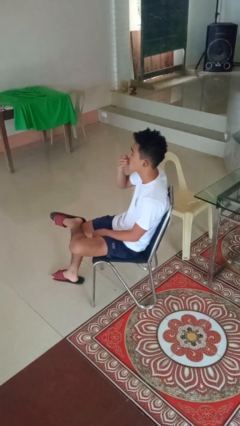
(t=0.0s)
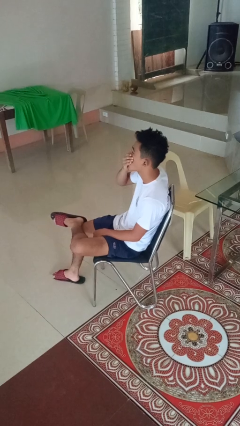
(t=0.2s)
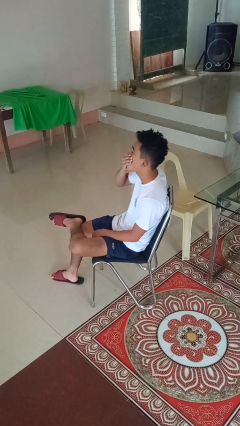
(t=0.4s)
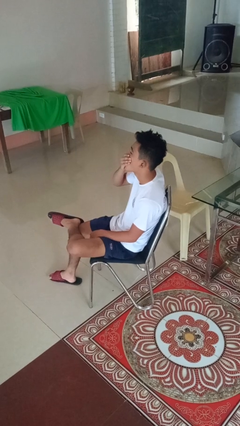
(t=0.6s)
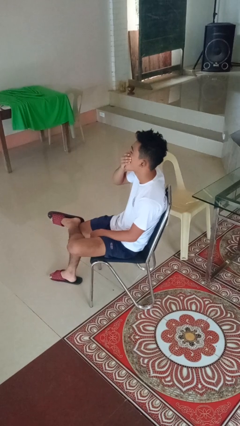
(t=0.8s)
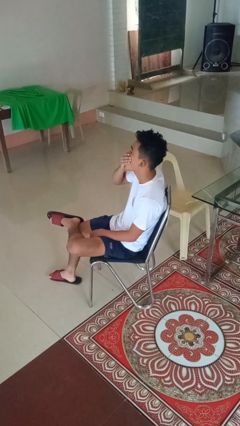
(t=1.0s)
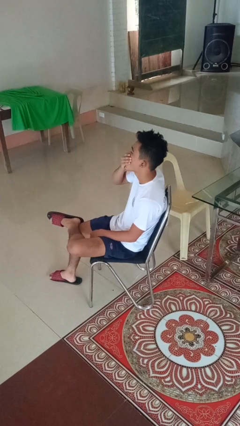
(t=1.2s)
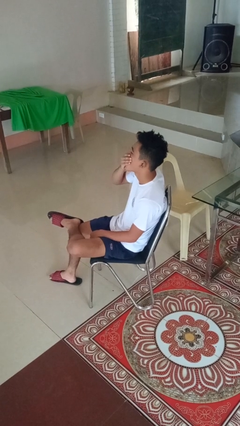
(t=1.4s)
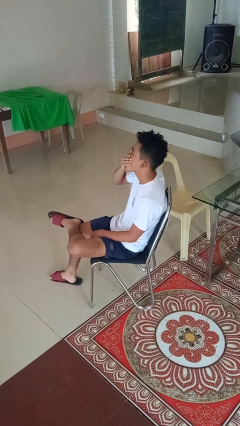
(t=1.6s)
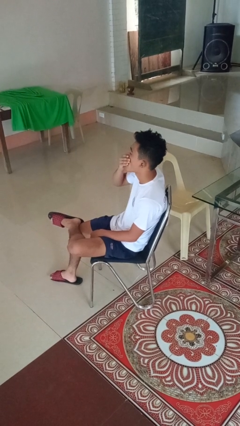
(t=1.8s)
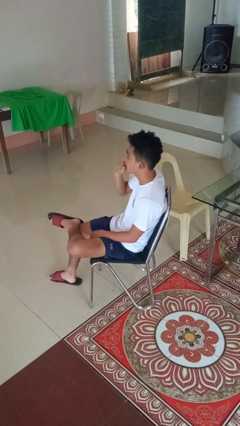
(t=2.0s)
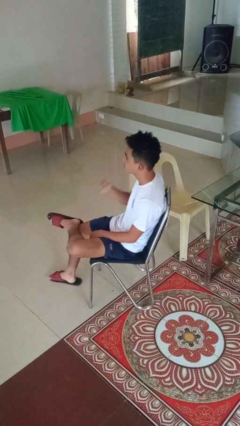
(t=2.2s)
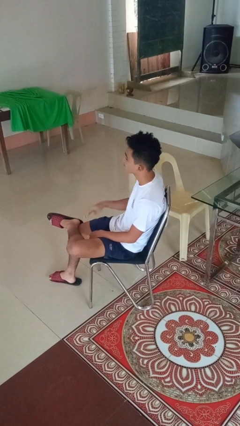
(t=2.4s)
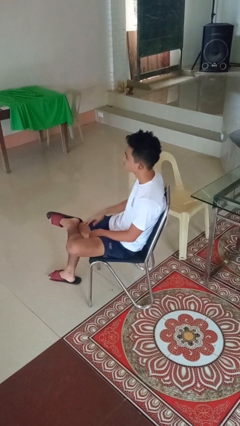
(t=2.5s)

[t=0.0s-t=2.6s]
person yawns

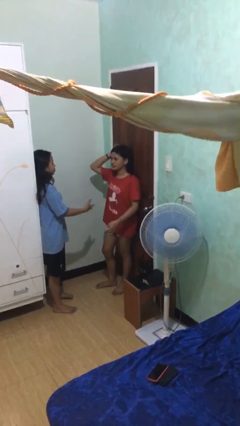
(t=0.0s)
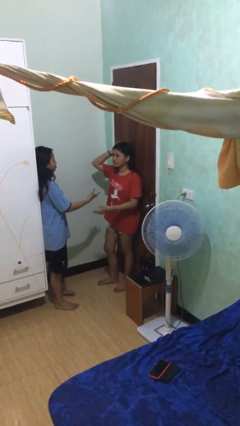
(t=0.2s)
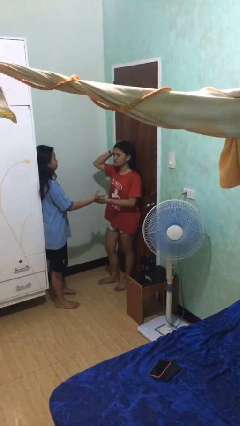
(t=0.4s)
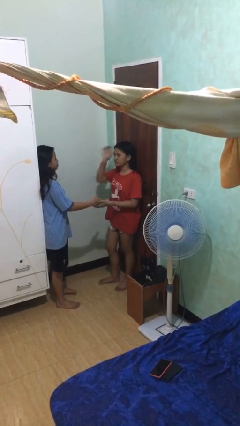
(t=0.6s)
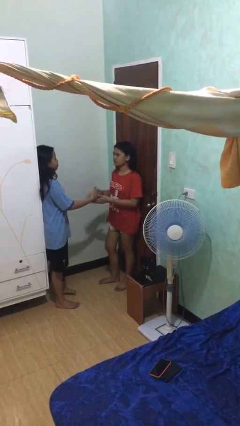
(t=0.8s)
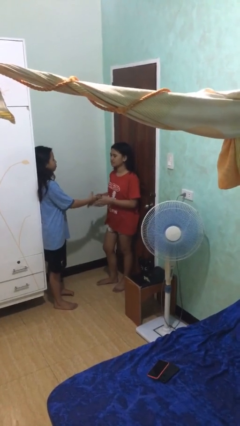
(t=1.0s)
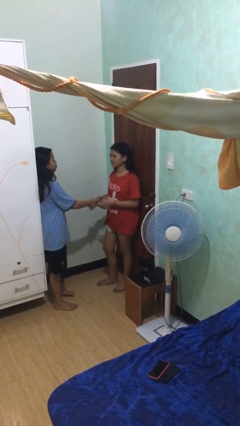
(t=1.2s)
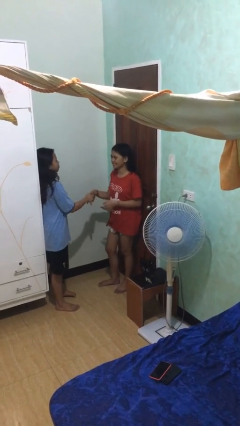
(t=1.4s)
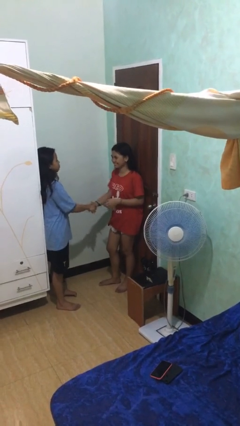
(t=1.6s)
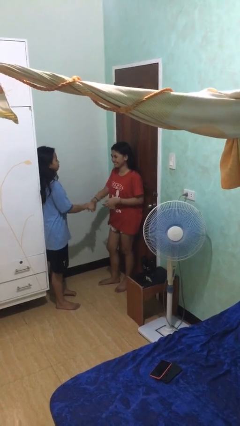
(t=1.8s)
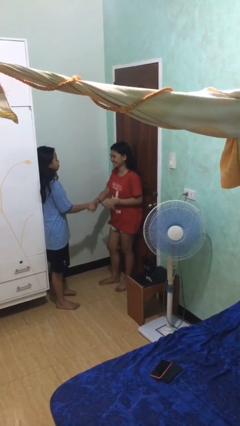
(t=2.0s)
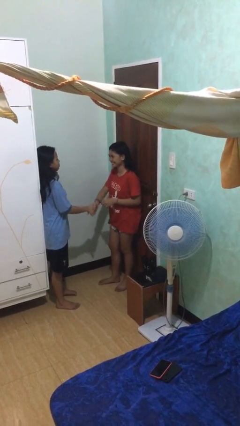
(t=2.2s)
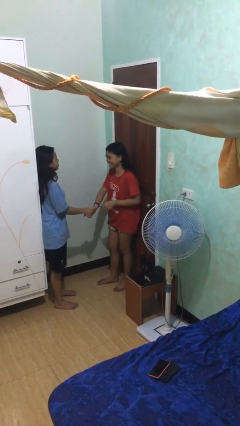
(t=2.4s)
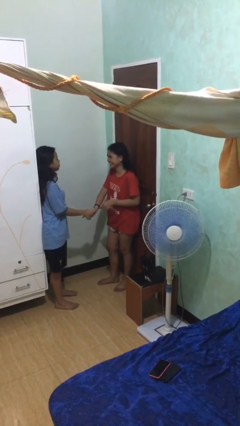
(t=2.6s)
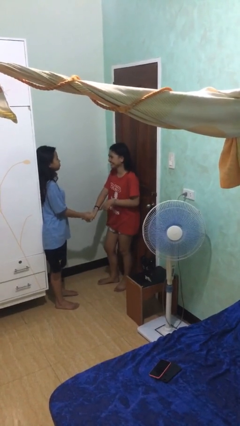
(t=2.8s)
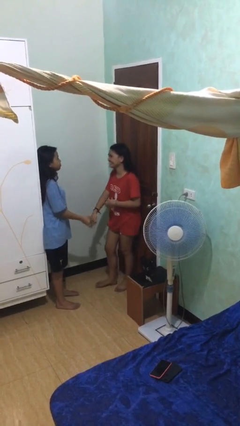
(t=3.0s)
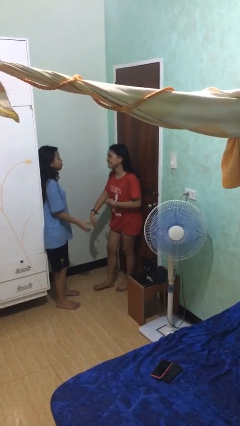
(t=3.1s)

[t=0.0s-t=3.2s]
person shakes hand

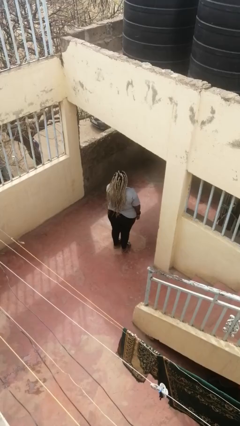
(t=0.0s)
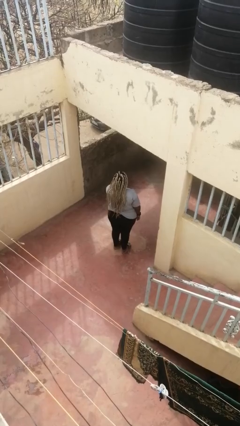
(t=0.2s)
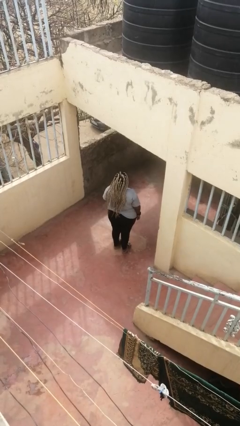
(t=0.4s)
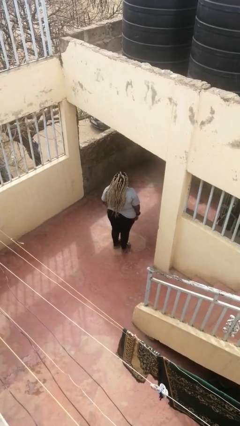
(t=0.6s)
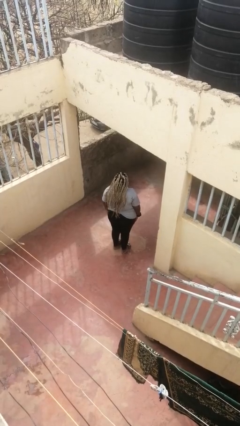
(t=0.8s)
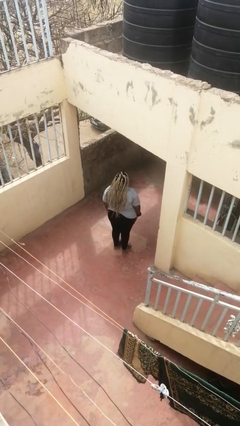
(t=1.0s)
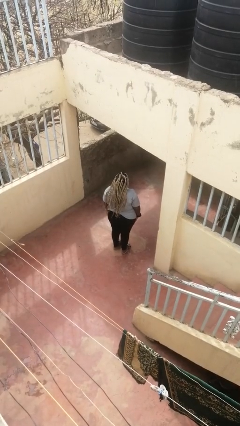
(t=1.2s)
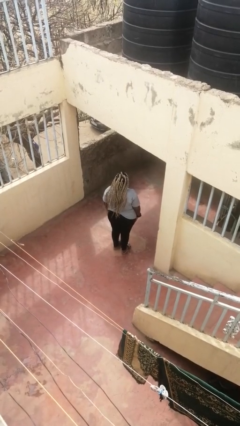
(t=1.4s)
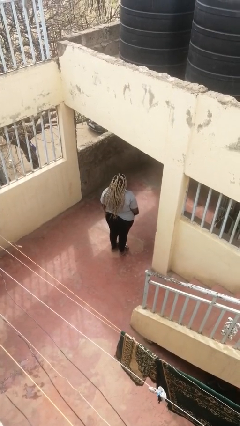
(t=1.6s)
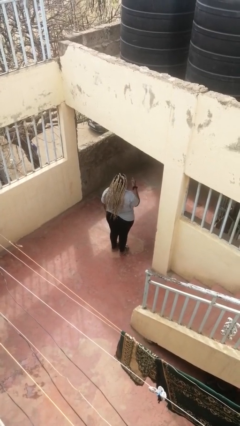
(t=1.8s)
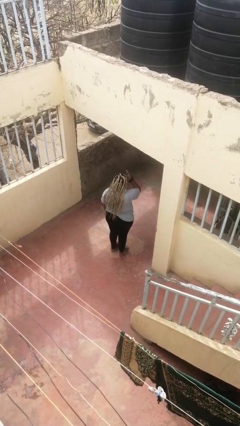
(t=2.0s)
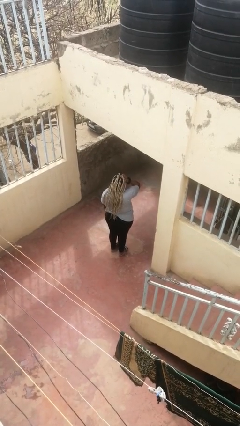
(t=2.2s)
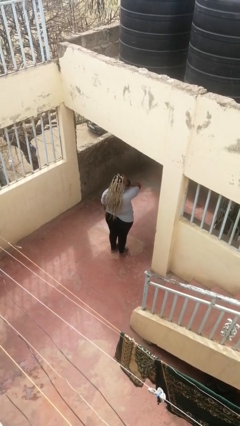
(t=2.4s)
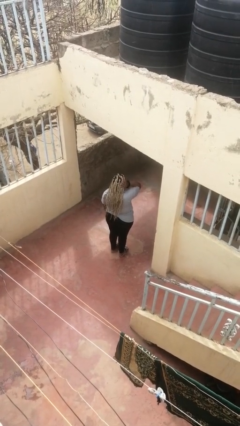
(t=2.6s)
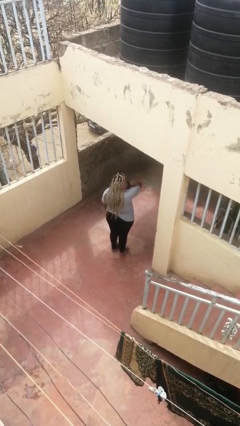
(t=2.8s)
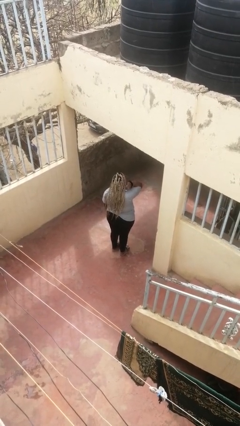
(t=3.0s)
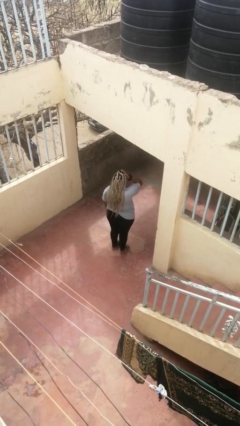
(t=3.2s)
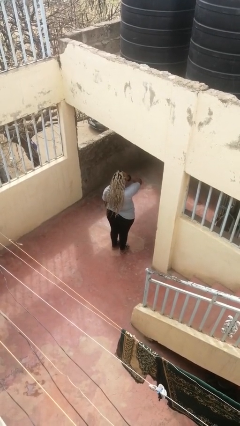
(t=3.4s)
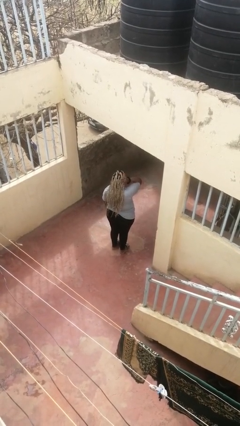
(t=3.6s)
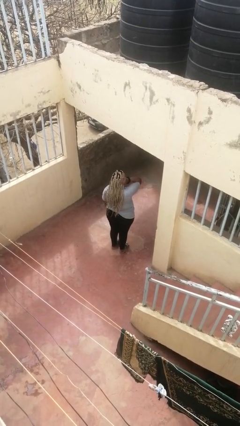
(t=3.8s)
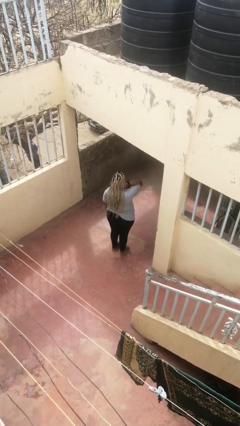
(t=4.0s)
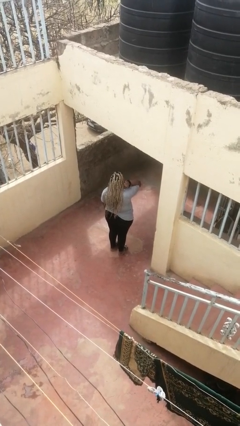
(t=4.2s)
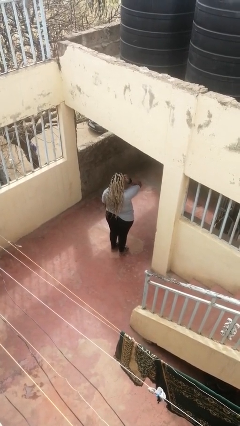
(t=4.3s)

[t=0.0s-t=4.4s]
person strokes hair

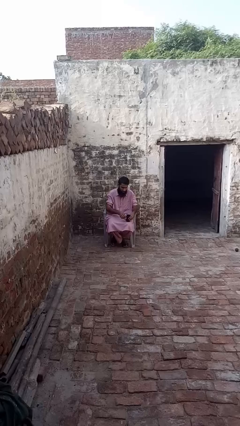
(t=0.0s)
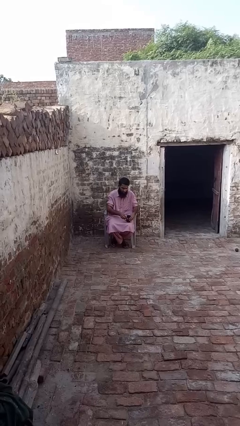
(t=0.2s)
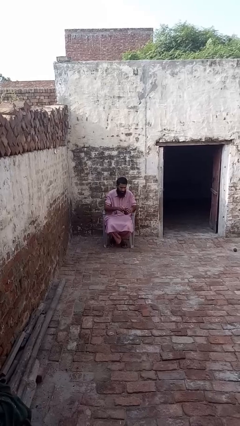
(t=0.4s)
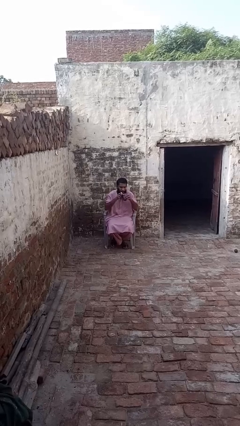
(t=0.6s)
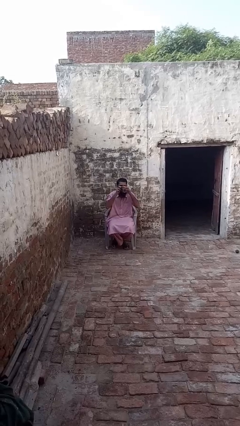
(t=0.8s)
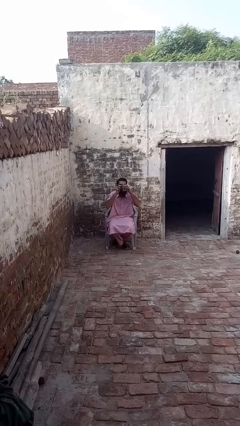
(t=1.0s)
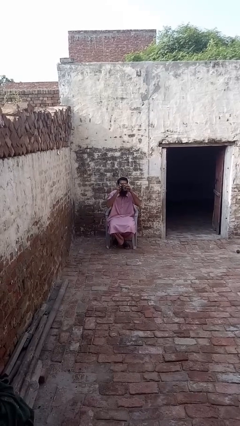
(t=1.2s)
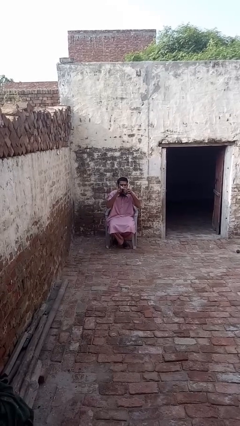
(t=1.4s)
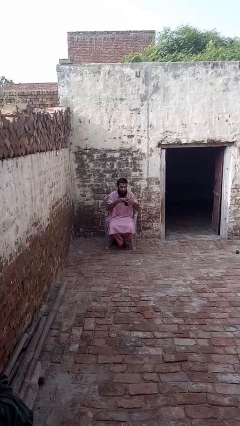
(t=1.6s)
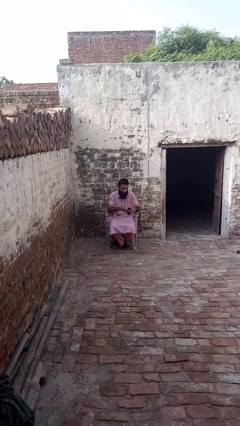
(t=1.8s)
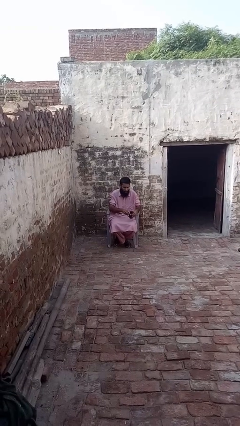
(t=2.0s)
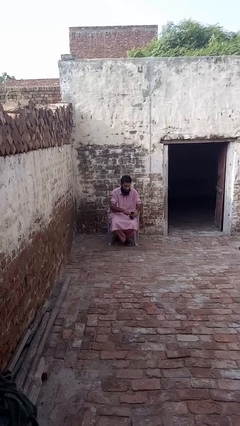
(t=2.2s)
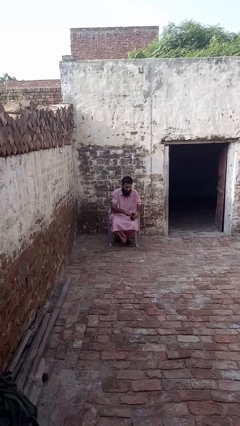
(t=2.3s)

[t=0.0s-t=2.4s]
person drinks from mug

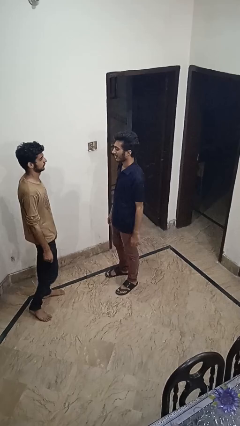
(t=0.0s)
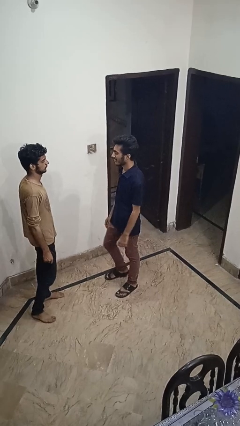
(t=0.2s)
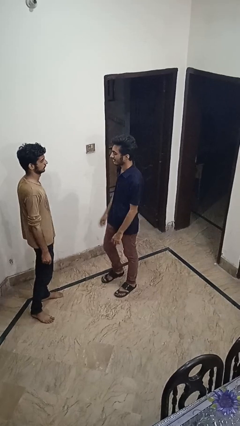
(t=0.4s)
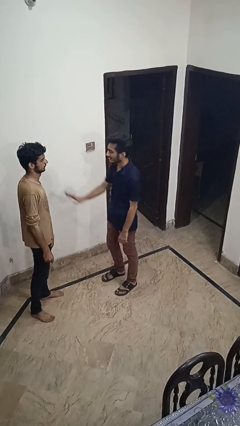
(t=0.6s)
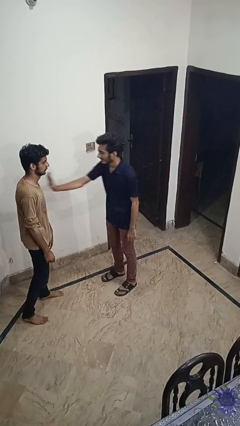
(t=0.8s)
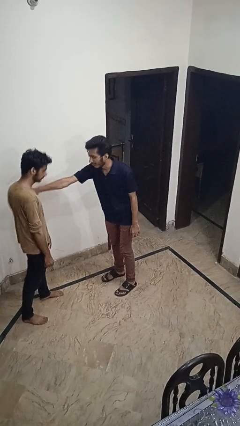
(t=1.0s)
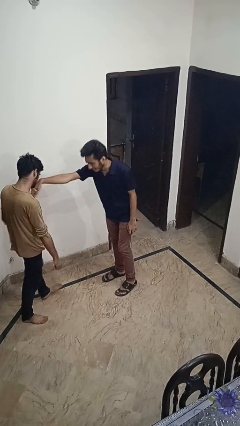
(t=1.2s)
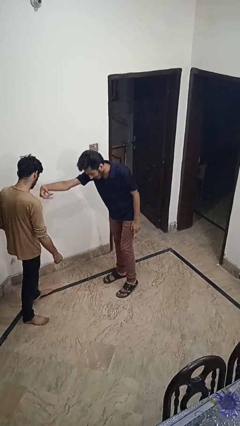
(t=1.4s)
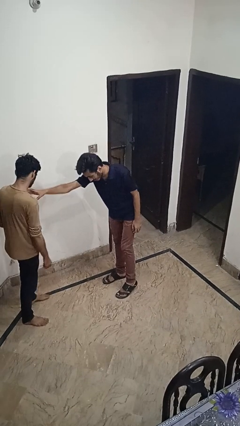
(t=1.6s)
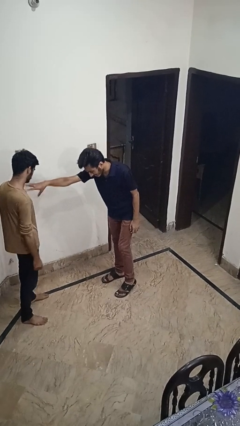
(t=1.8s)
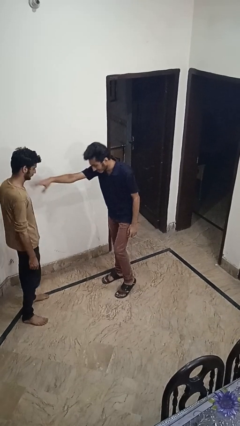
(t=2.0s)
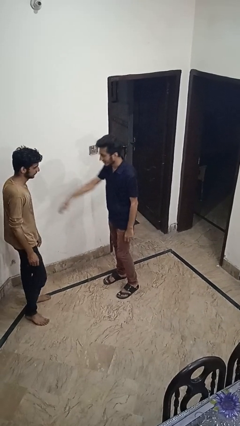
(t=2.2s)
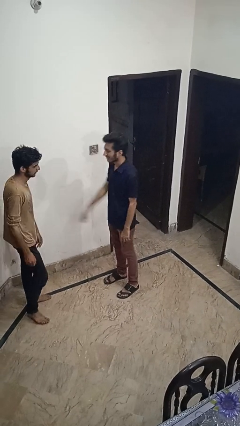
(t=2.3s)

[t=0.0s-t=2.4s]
person shoves person

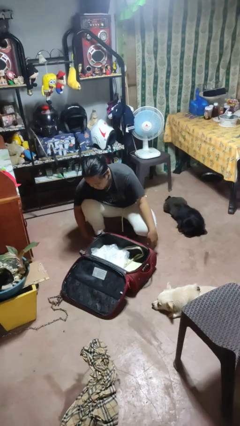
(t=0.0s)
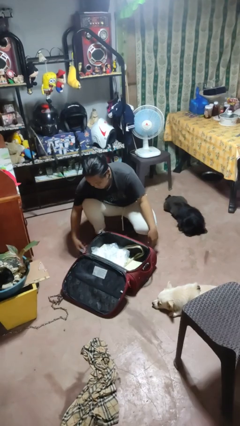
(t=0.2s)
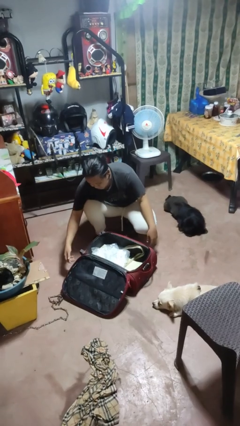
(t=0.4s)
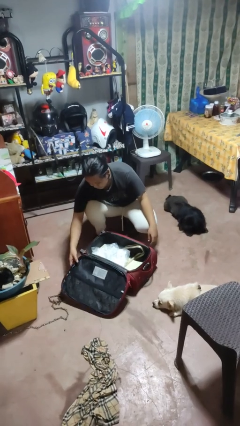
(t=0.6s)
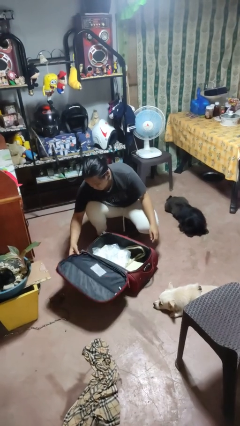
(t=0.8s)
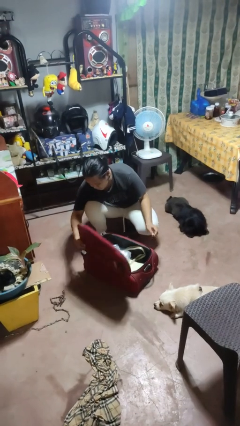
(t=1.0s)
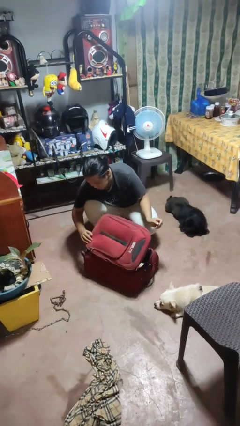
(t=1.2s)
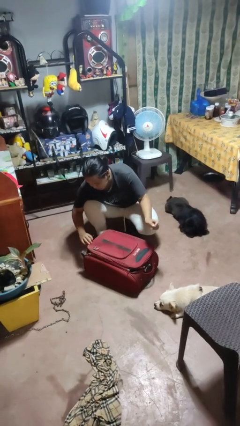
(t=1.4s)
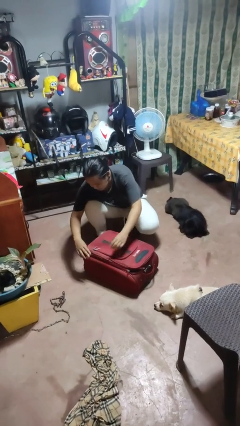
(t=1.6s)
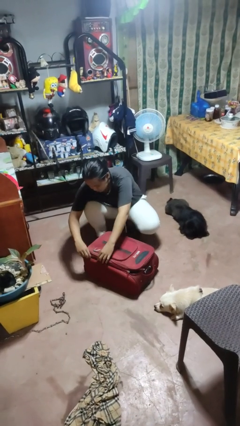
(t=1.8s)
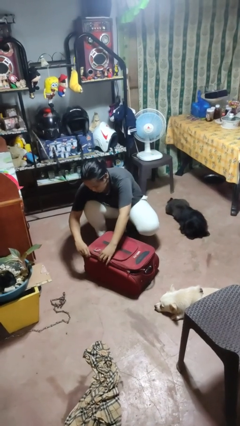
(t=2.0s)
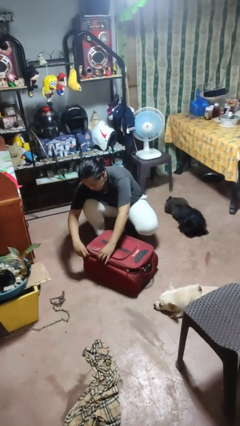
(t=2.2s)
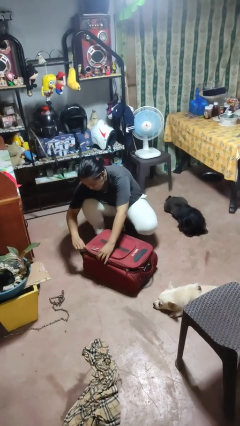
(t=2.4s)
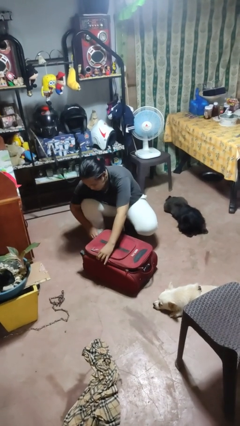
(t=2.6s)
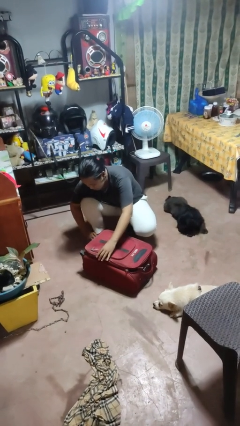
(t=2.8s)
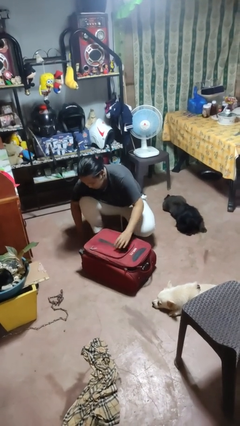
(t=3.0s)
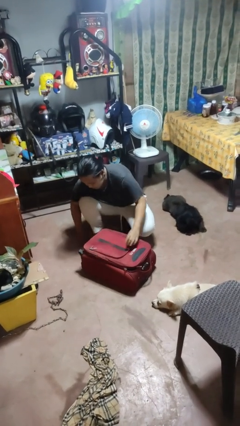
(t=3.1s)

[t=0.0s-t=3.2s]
person closes suitcase
